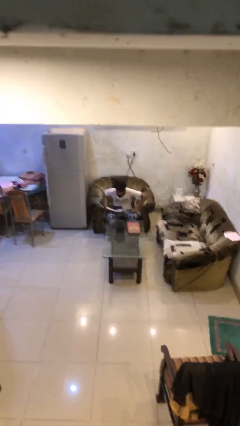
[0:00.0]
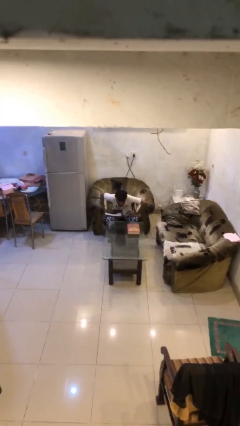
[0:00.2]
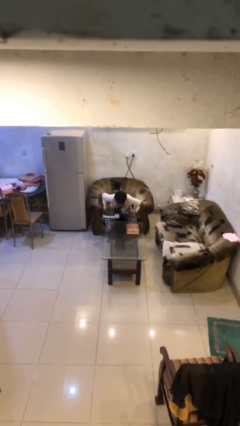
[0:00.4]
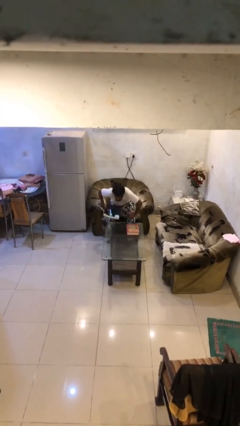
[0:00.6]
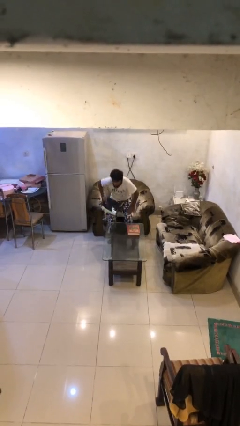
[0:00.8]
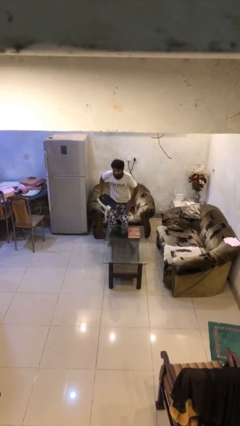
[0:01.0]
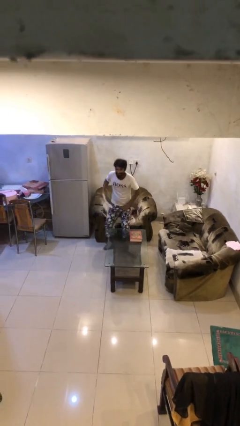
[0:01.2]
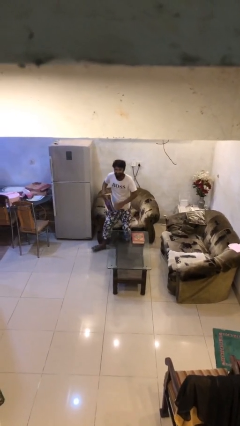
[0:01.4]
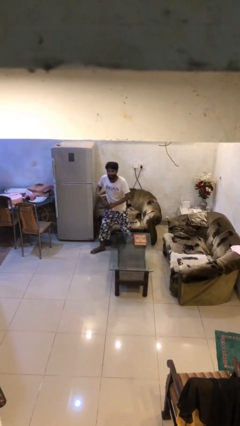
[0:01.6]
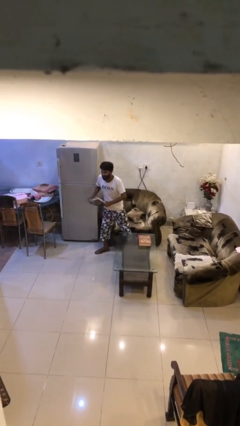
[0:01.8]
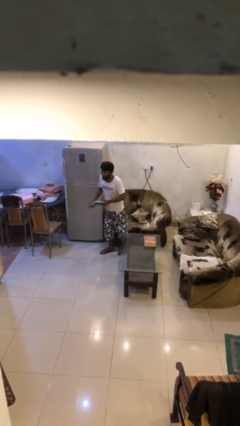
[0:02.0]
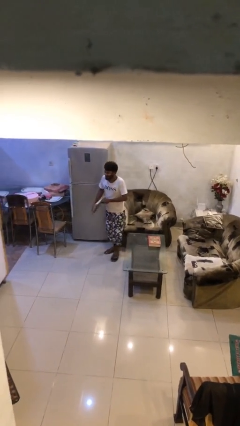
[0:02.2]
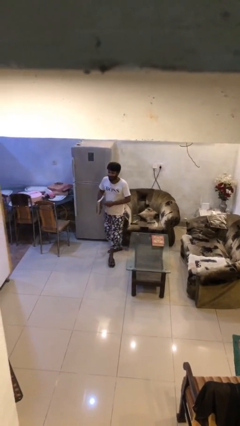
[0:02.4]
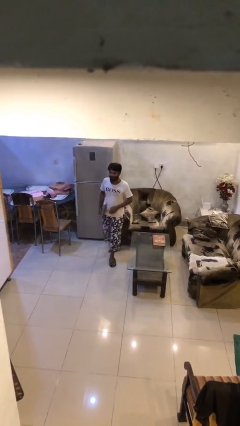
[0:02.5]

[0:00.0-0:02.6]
person stands up

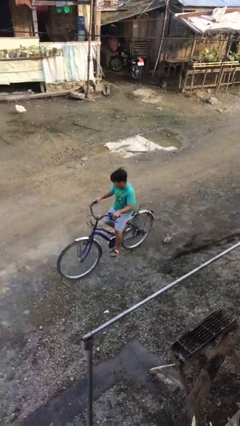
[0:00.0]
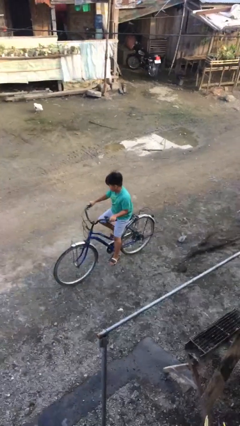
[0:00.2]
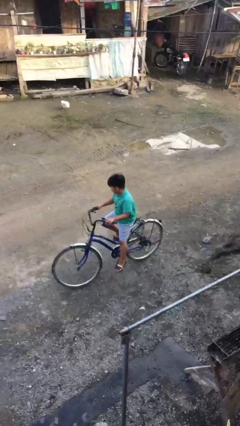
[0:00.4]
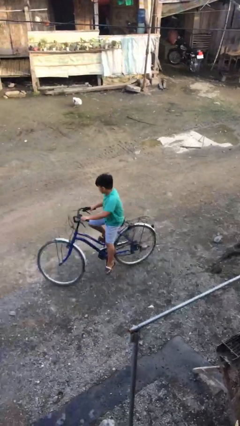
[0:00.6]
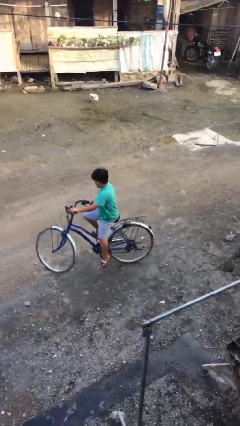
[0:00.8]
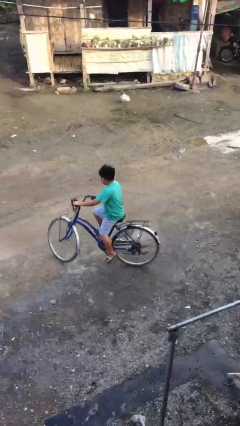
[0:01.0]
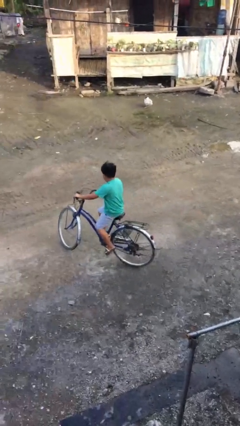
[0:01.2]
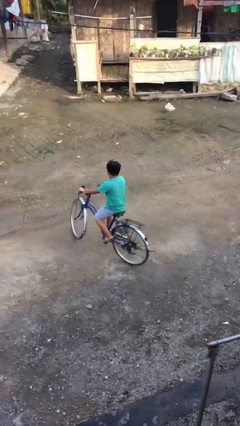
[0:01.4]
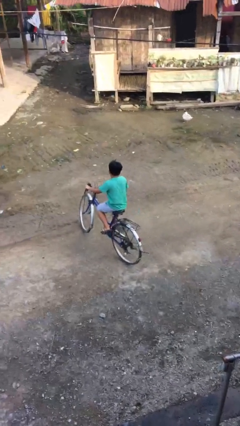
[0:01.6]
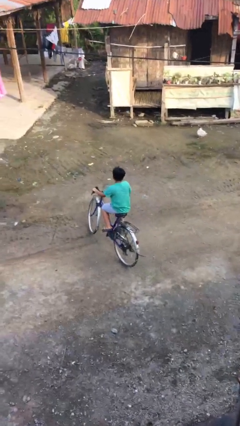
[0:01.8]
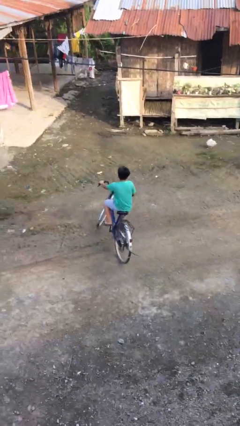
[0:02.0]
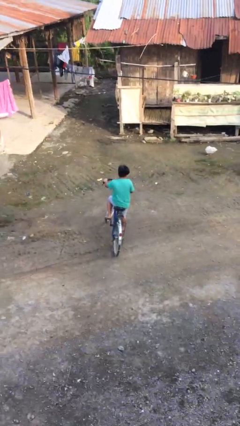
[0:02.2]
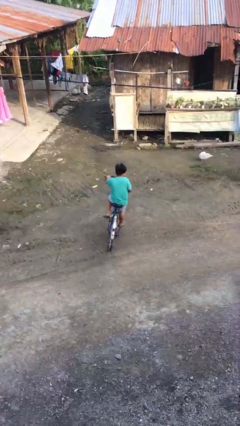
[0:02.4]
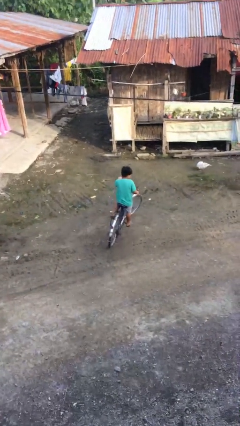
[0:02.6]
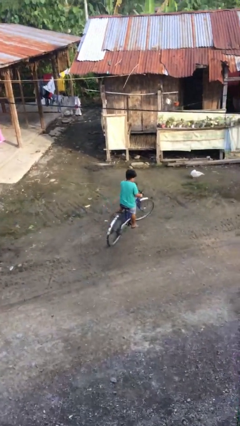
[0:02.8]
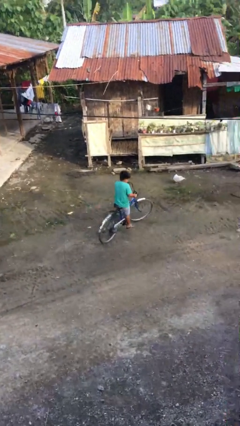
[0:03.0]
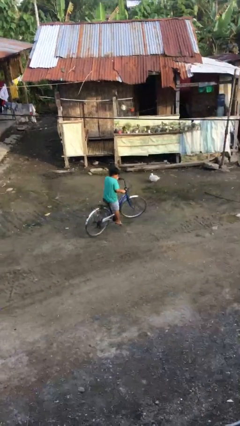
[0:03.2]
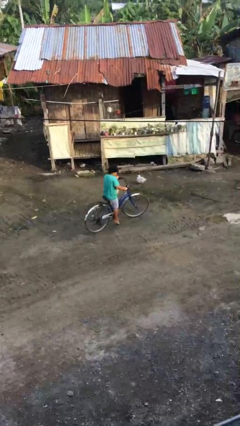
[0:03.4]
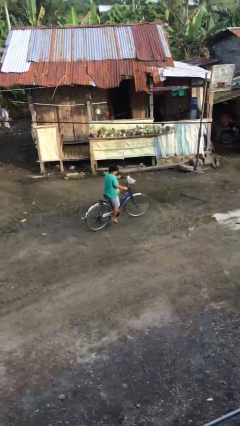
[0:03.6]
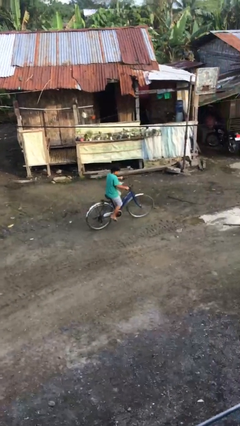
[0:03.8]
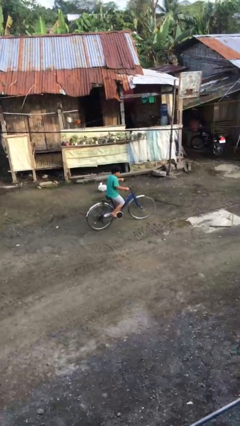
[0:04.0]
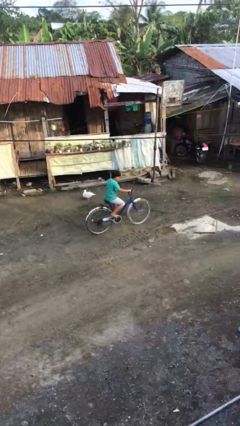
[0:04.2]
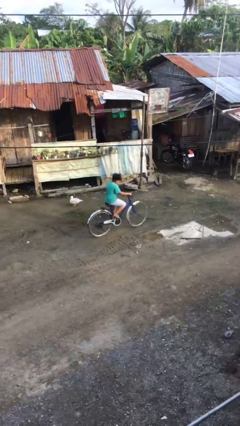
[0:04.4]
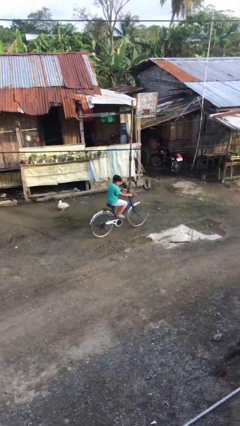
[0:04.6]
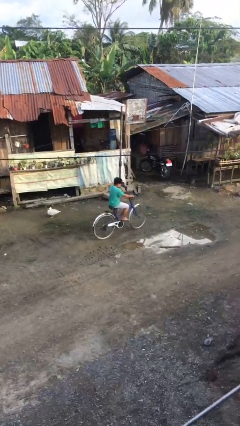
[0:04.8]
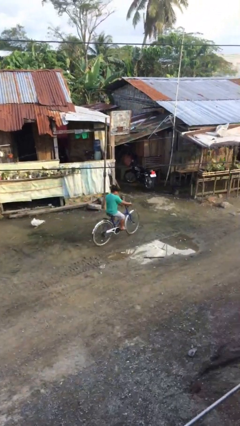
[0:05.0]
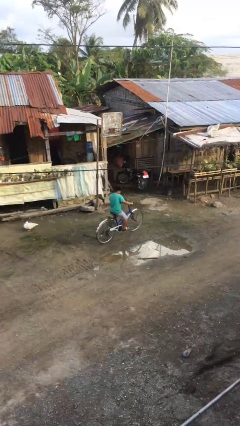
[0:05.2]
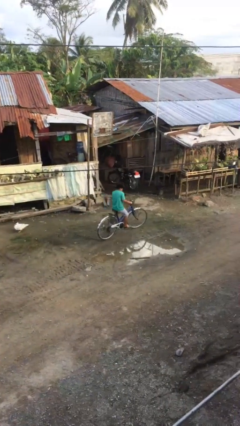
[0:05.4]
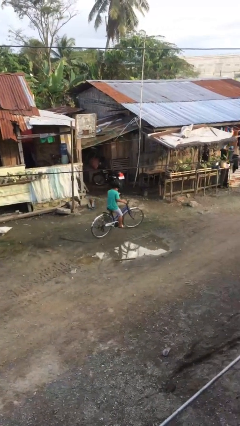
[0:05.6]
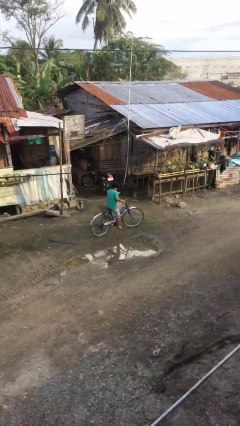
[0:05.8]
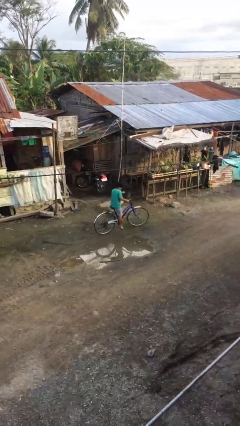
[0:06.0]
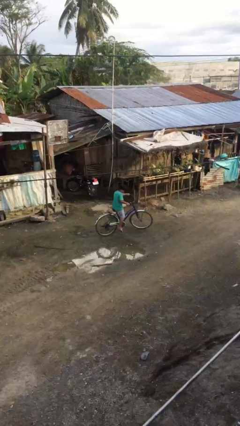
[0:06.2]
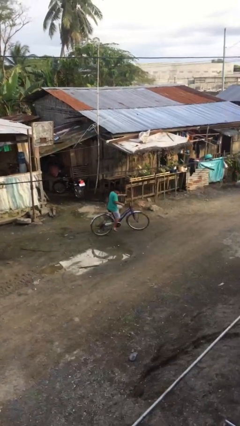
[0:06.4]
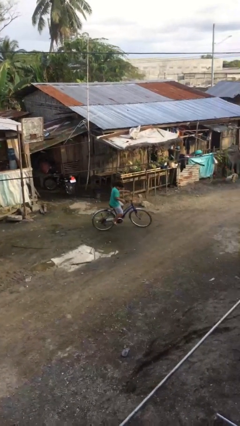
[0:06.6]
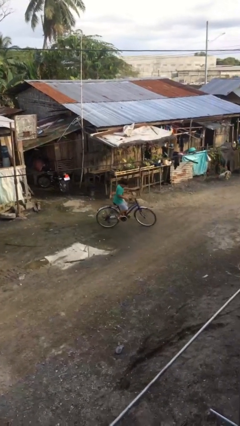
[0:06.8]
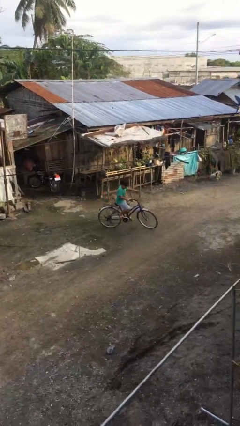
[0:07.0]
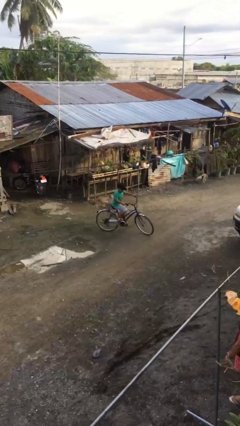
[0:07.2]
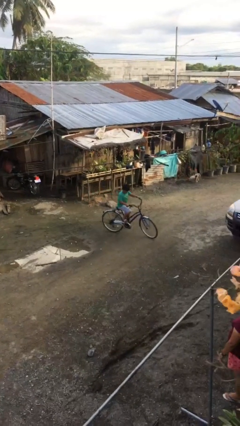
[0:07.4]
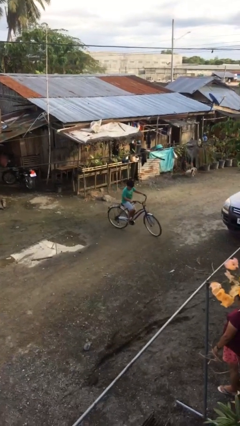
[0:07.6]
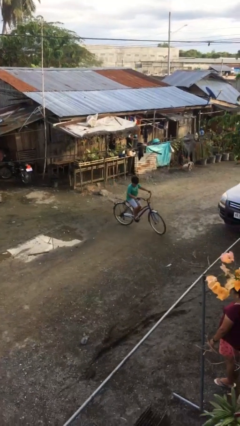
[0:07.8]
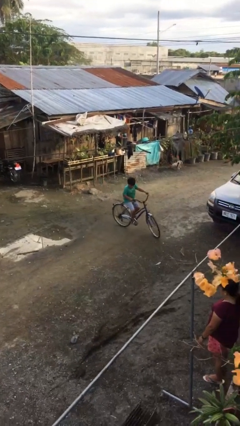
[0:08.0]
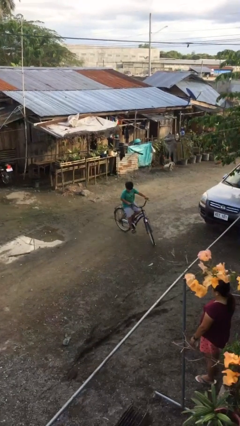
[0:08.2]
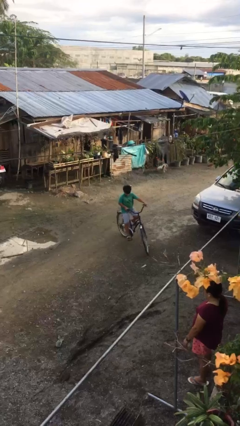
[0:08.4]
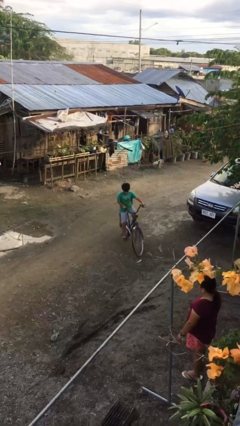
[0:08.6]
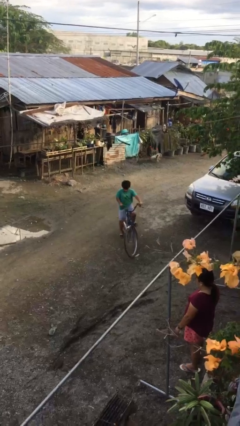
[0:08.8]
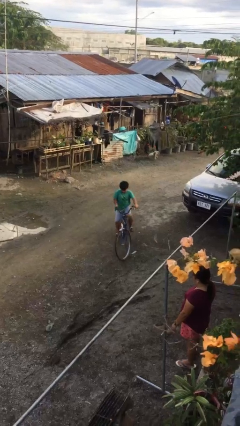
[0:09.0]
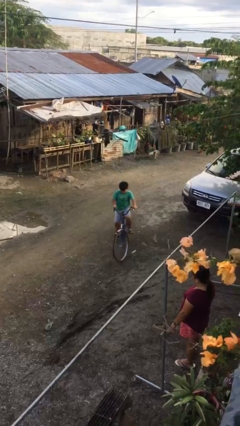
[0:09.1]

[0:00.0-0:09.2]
person rides bicycle

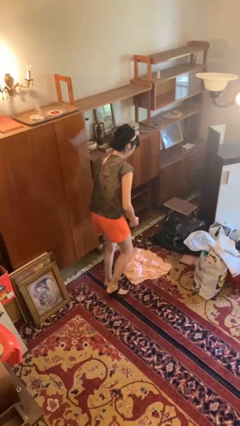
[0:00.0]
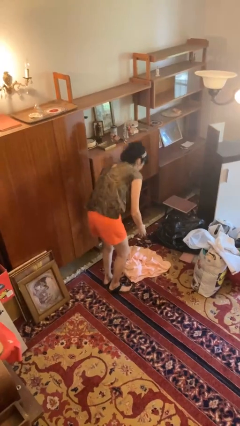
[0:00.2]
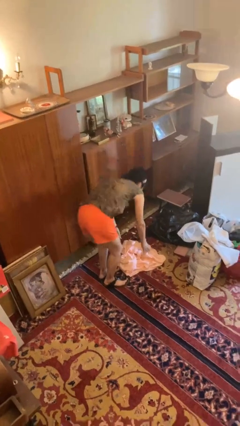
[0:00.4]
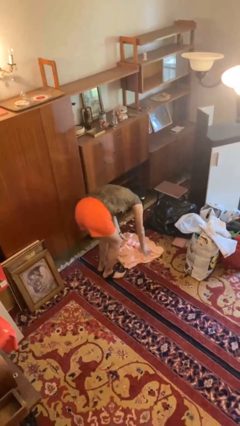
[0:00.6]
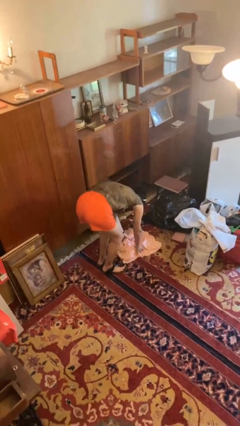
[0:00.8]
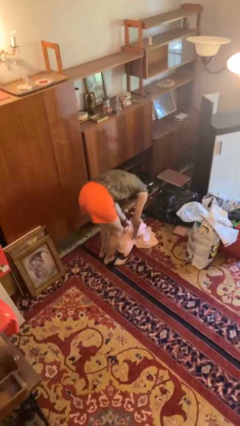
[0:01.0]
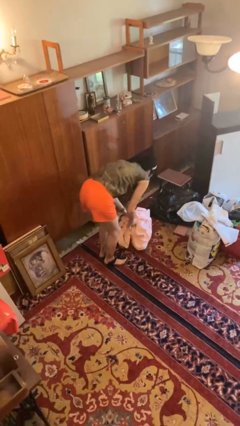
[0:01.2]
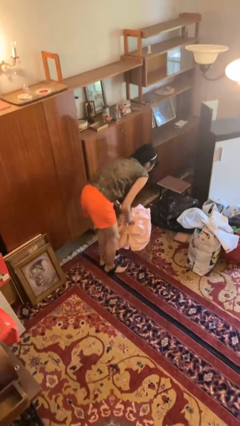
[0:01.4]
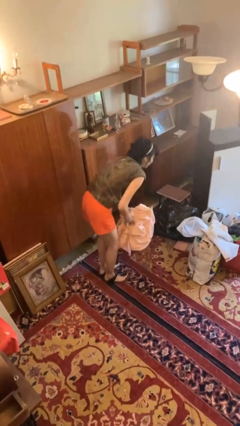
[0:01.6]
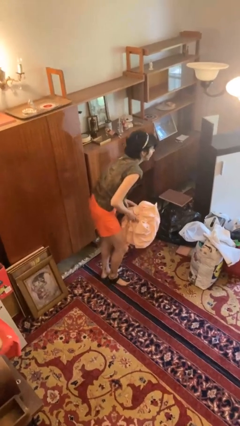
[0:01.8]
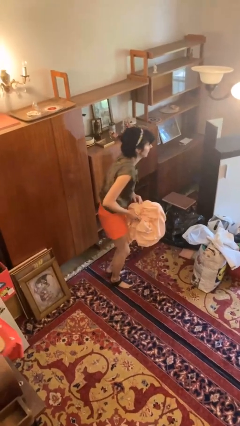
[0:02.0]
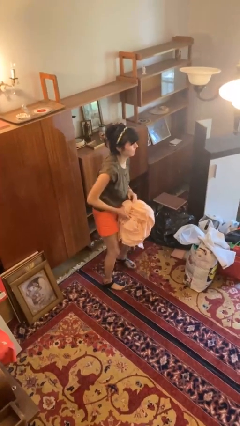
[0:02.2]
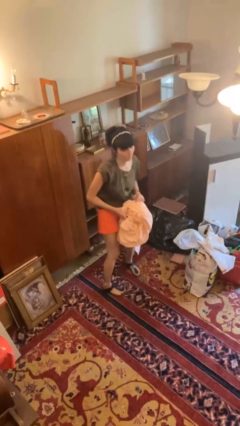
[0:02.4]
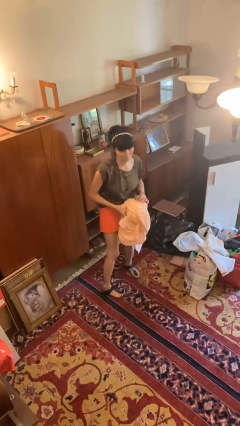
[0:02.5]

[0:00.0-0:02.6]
person picks up object from floor

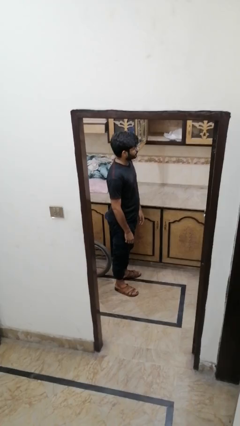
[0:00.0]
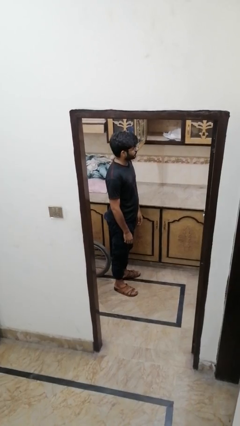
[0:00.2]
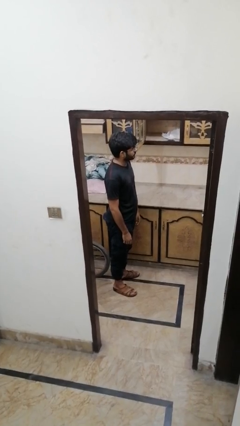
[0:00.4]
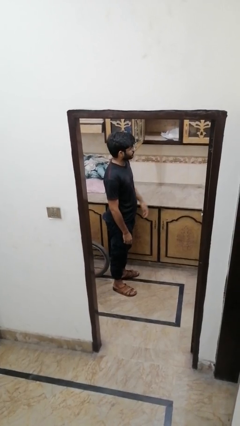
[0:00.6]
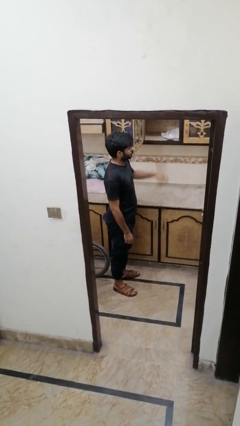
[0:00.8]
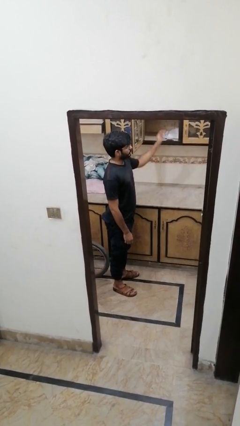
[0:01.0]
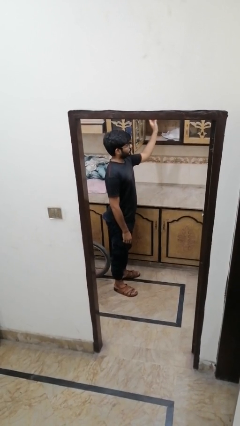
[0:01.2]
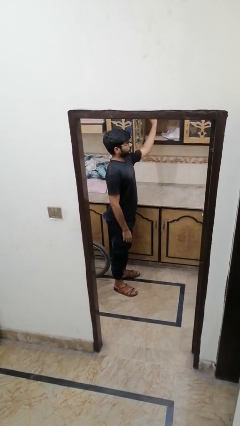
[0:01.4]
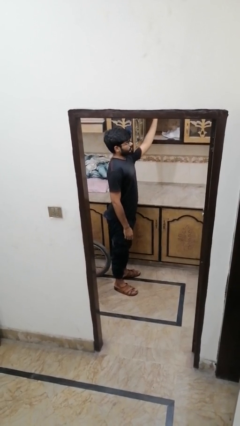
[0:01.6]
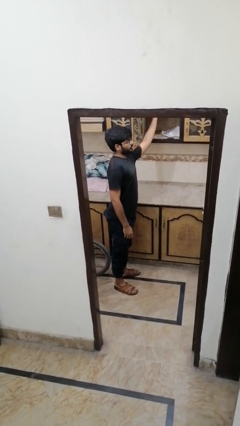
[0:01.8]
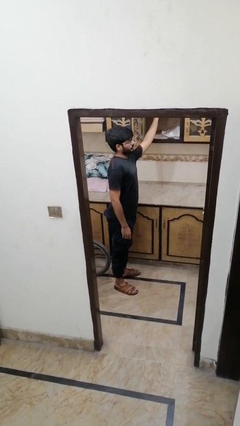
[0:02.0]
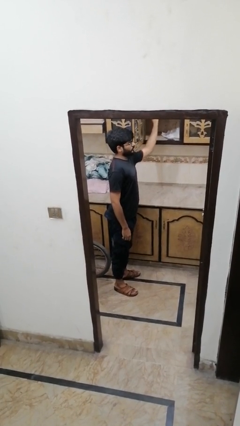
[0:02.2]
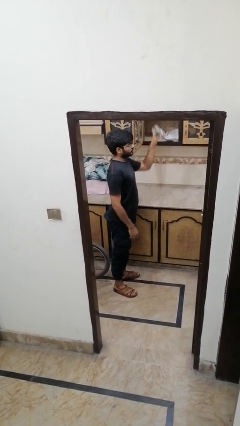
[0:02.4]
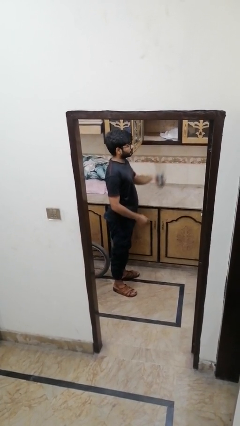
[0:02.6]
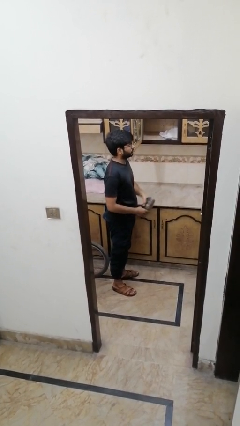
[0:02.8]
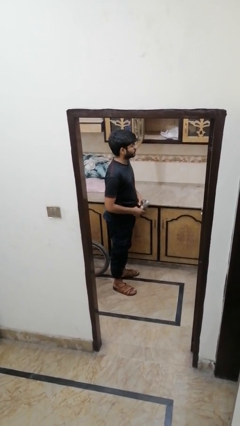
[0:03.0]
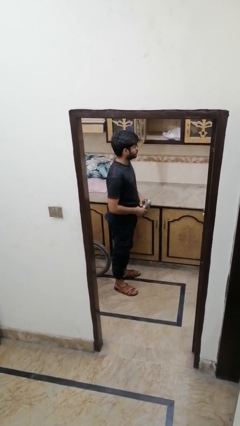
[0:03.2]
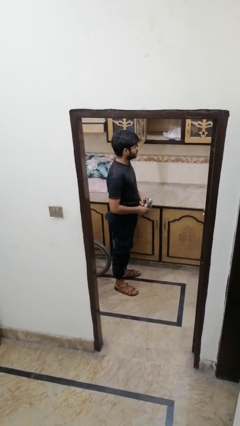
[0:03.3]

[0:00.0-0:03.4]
person picks up object from cabinet
